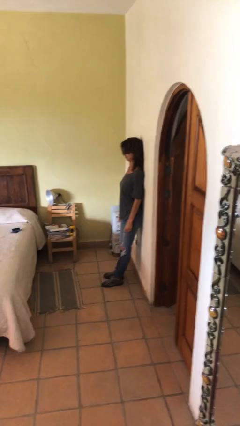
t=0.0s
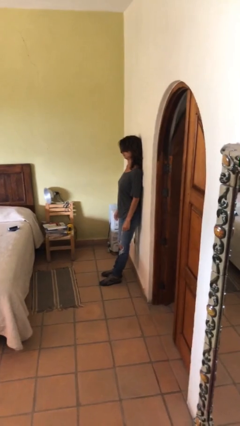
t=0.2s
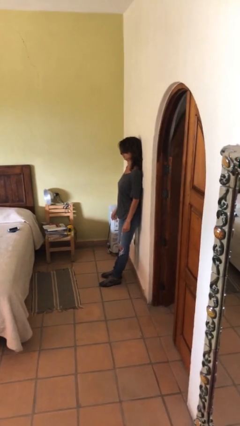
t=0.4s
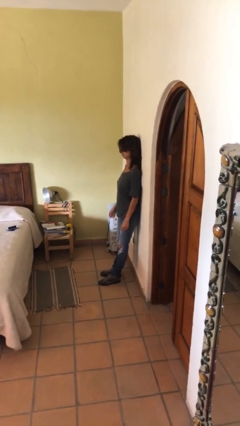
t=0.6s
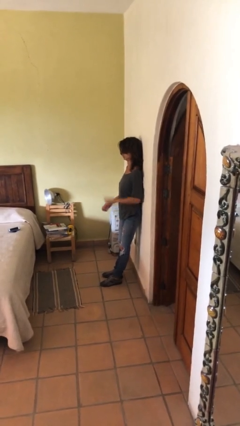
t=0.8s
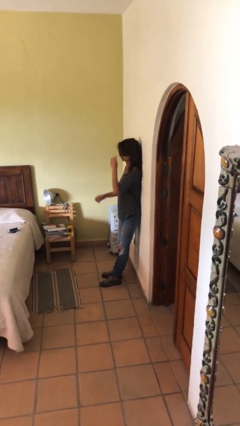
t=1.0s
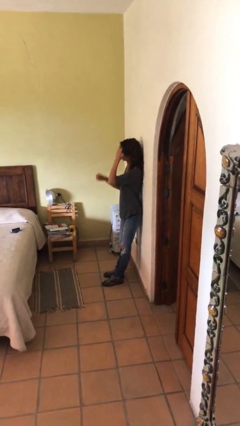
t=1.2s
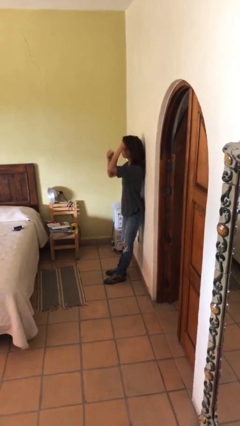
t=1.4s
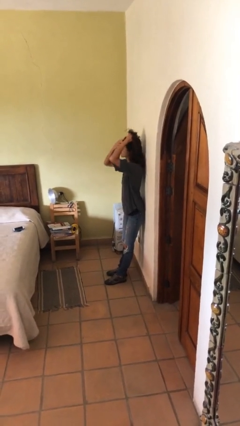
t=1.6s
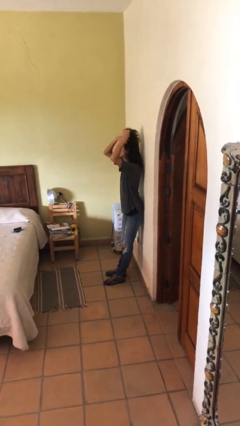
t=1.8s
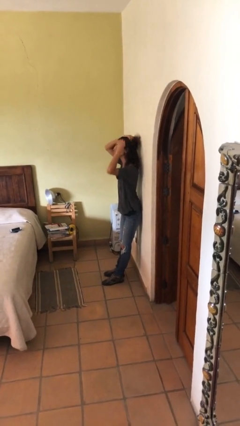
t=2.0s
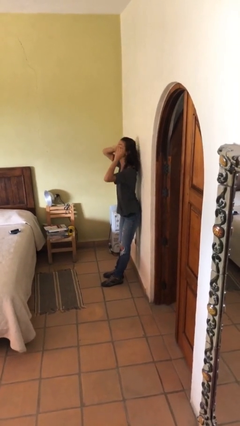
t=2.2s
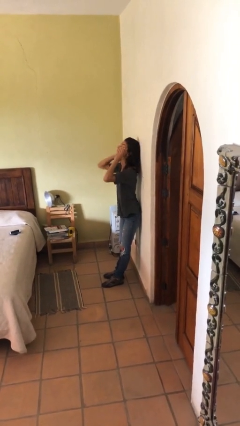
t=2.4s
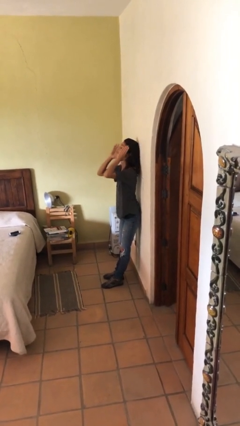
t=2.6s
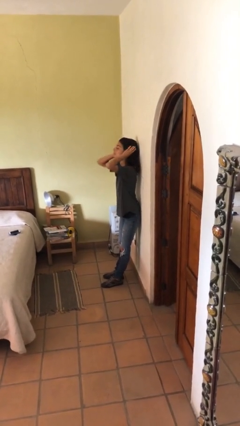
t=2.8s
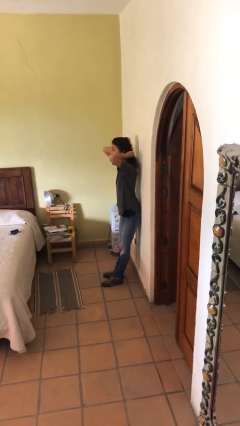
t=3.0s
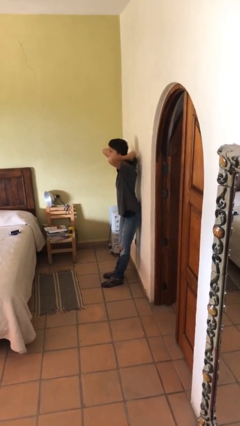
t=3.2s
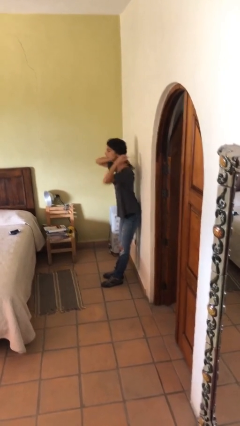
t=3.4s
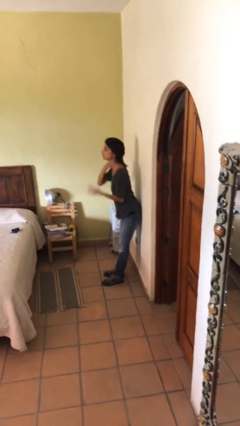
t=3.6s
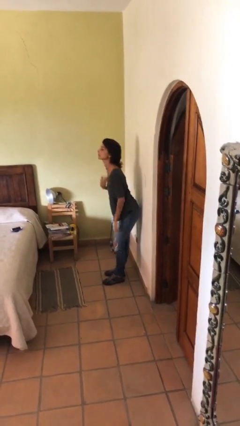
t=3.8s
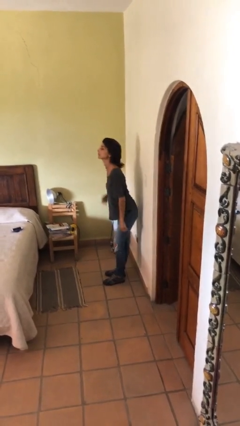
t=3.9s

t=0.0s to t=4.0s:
person strokes hair

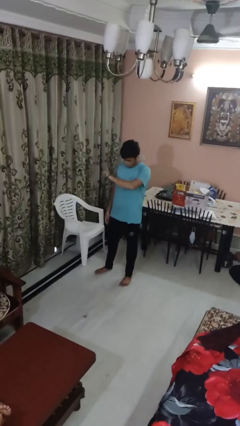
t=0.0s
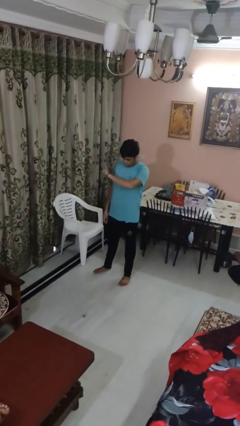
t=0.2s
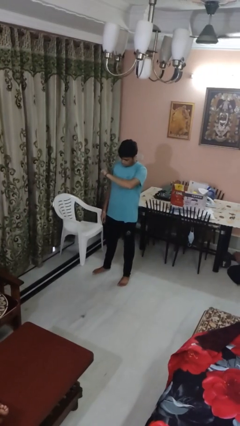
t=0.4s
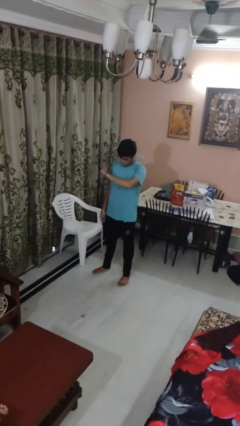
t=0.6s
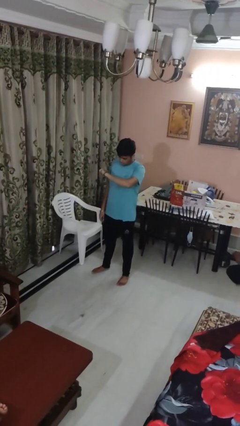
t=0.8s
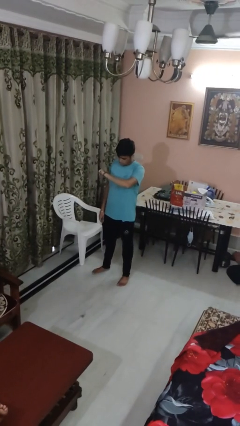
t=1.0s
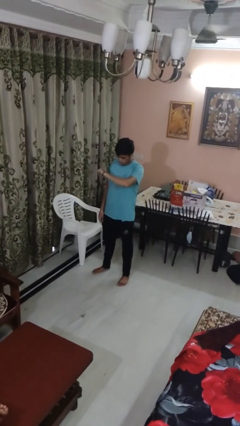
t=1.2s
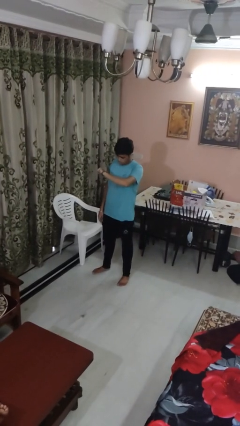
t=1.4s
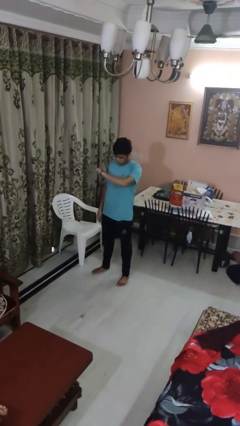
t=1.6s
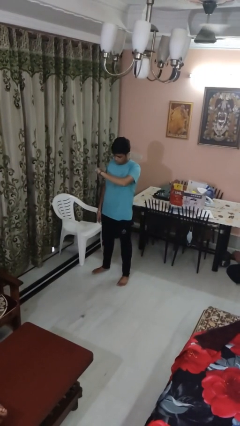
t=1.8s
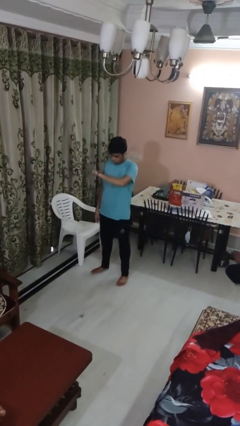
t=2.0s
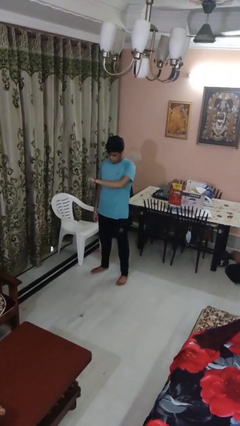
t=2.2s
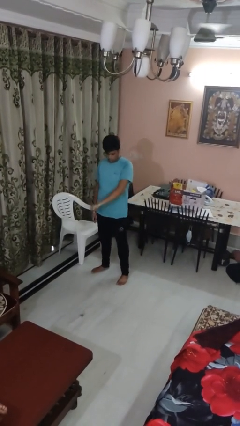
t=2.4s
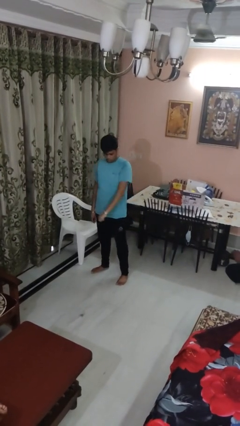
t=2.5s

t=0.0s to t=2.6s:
person looks at wristwatch

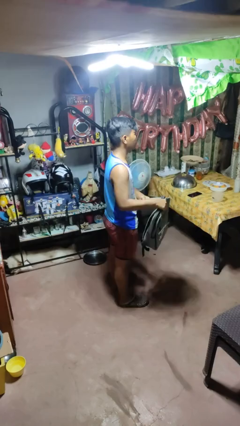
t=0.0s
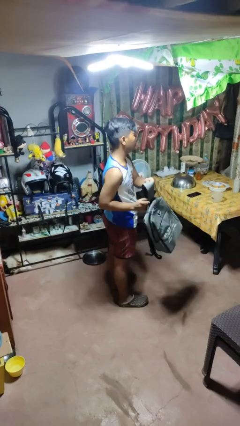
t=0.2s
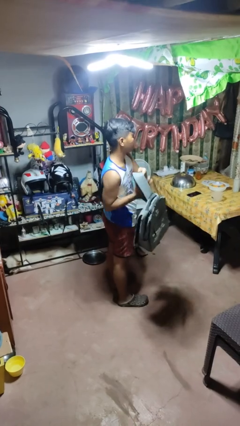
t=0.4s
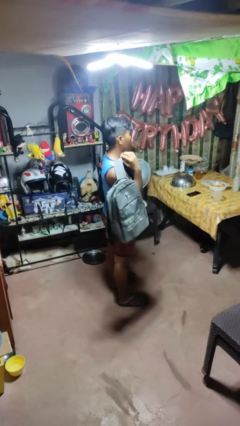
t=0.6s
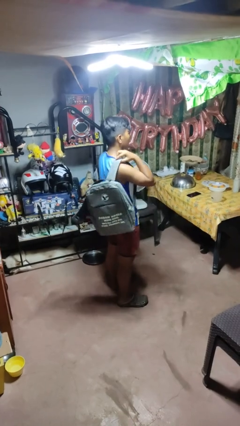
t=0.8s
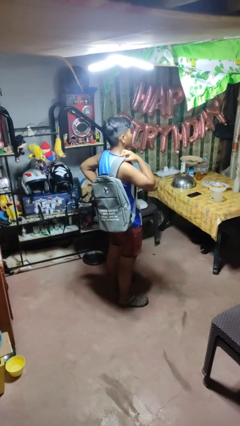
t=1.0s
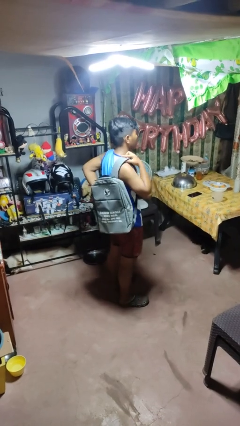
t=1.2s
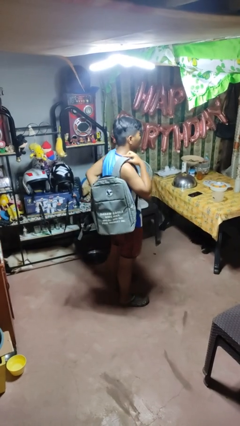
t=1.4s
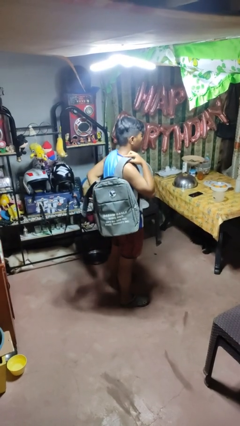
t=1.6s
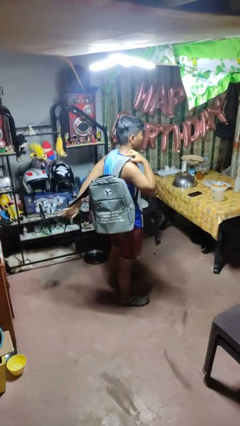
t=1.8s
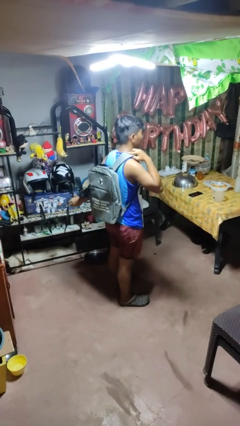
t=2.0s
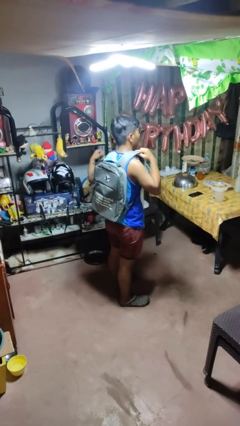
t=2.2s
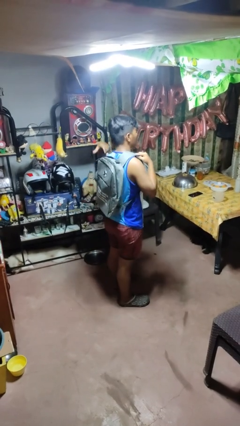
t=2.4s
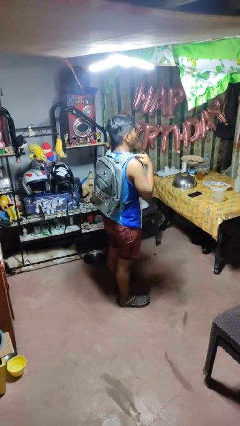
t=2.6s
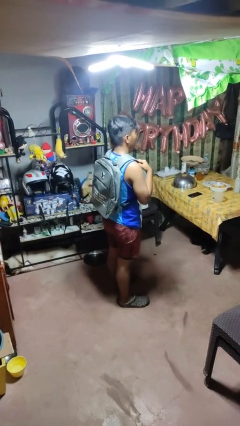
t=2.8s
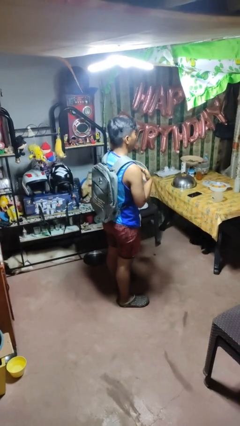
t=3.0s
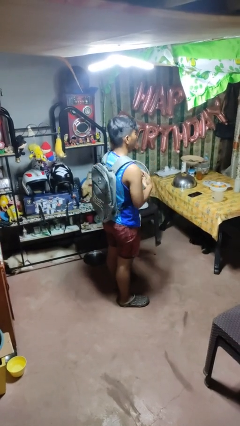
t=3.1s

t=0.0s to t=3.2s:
person puts on backpack

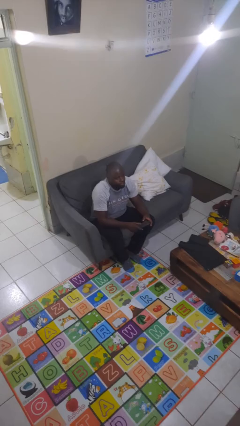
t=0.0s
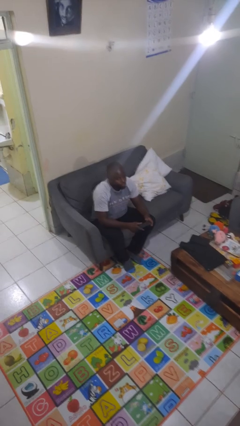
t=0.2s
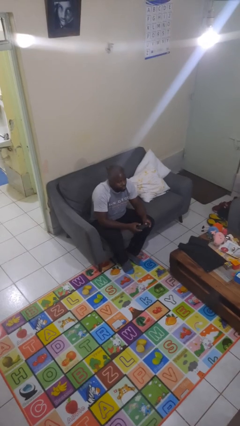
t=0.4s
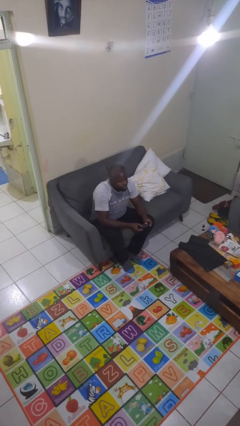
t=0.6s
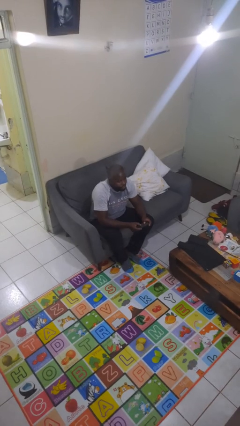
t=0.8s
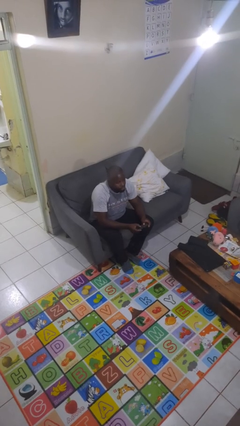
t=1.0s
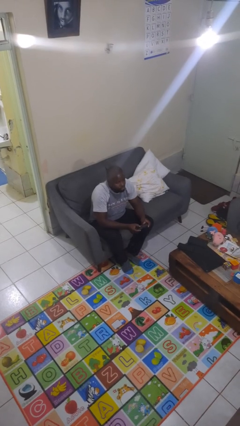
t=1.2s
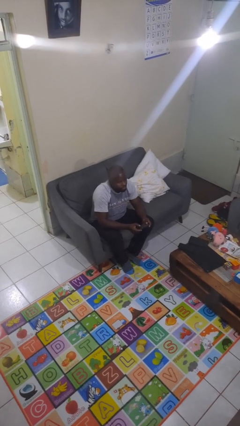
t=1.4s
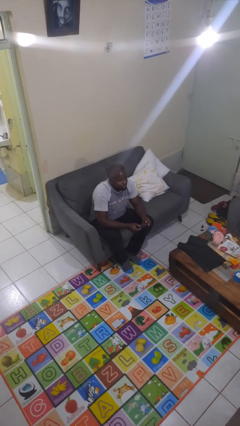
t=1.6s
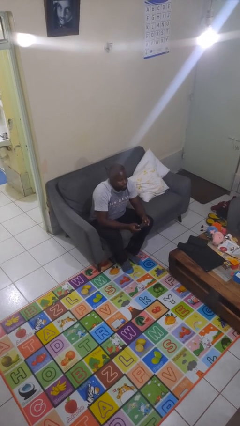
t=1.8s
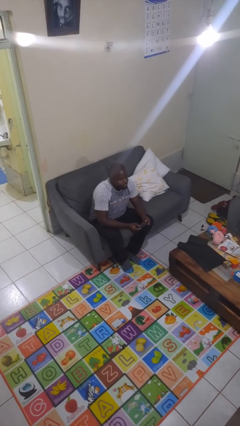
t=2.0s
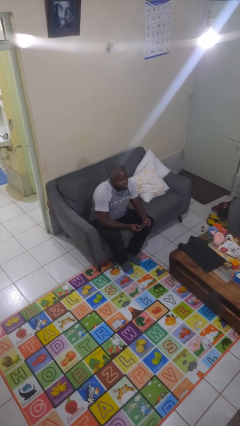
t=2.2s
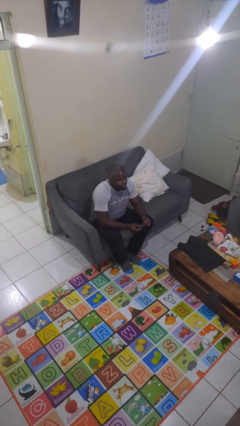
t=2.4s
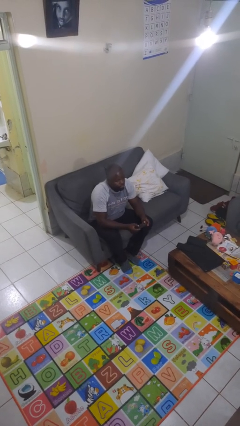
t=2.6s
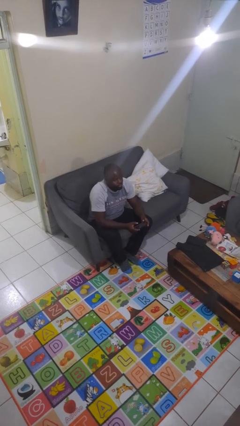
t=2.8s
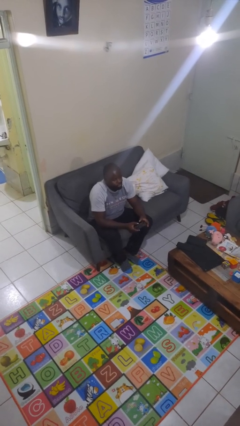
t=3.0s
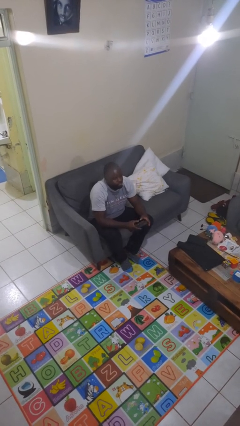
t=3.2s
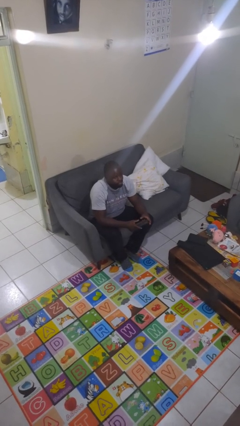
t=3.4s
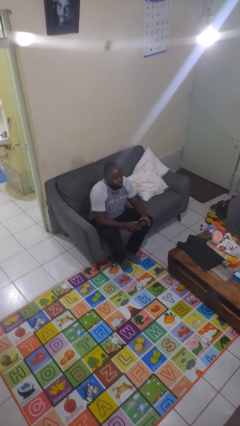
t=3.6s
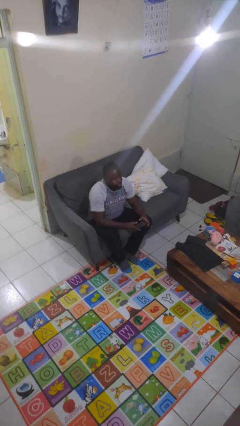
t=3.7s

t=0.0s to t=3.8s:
person interacts with handheld game

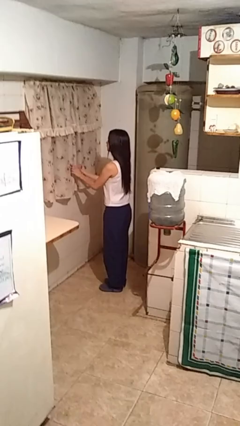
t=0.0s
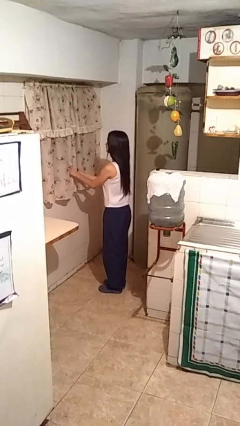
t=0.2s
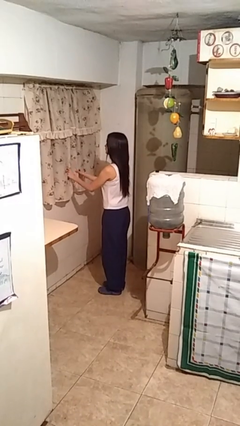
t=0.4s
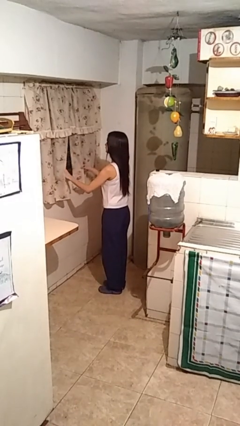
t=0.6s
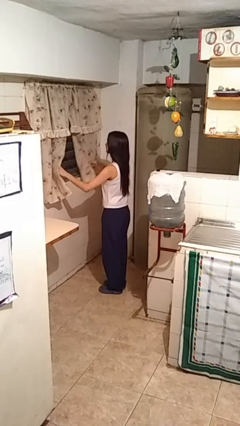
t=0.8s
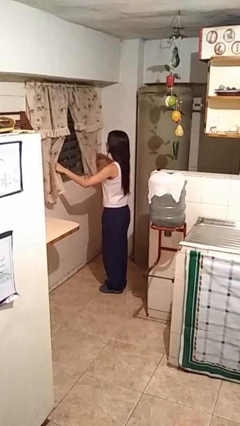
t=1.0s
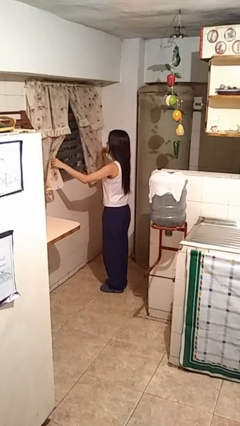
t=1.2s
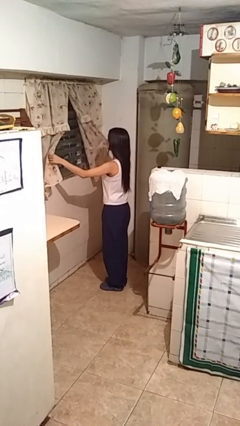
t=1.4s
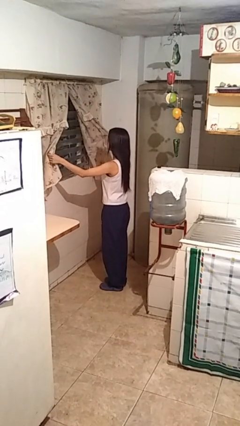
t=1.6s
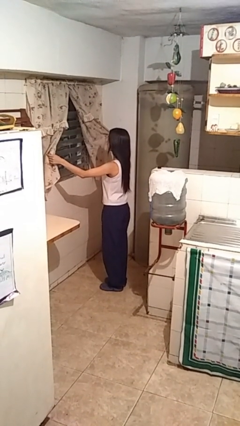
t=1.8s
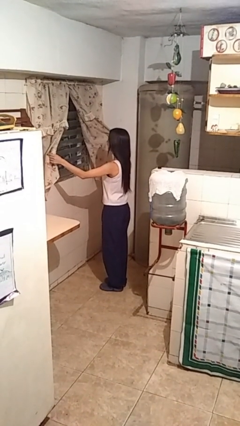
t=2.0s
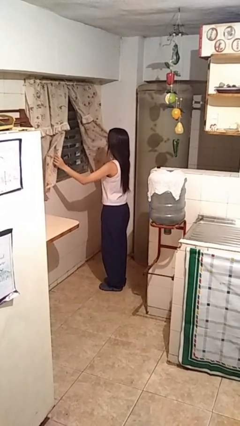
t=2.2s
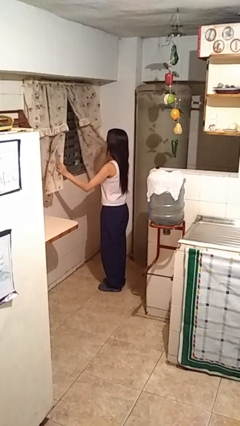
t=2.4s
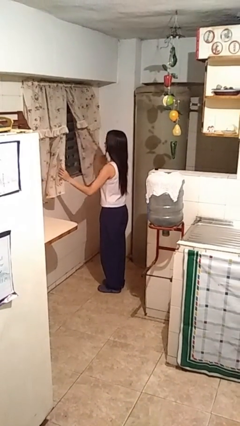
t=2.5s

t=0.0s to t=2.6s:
person opens curtains

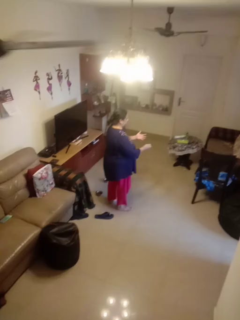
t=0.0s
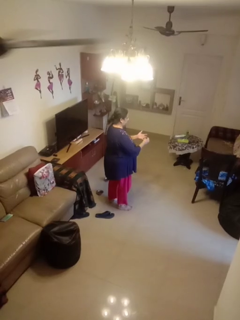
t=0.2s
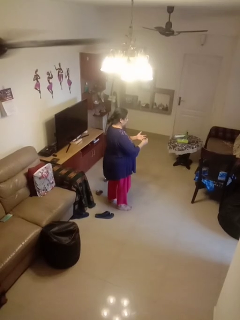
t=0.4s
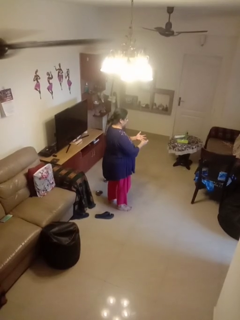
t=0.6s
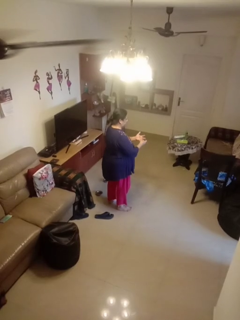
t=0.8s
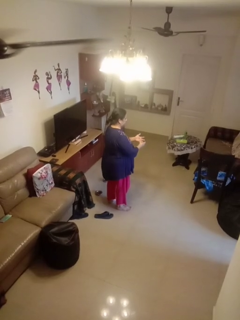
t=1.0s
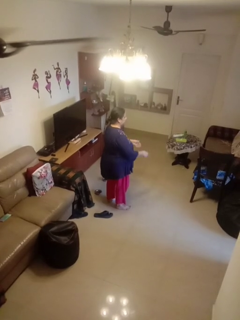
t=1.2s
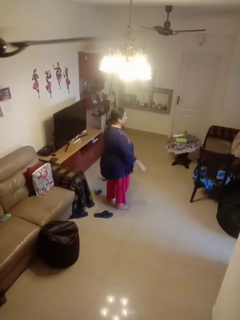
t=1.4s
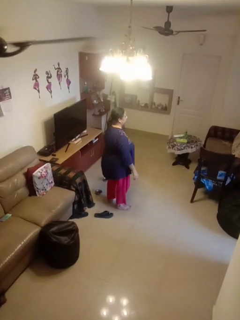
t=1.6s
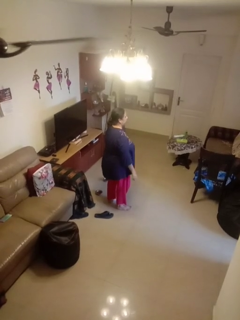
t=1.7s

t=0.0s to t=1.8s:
person puts on ring
